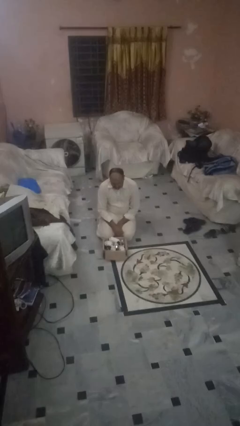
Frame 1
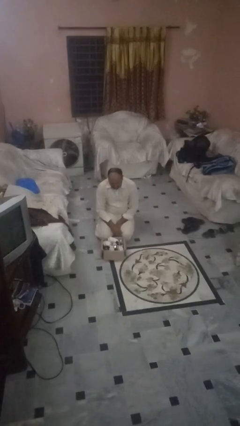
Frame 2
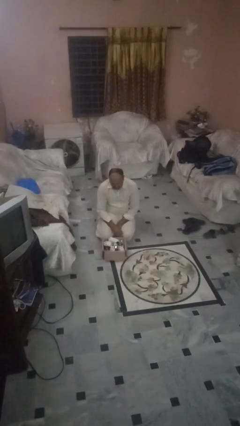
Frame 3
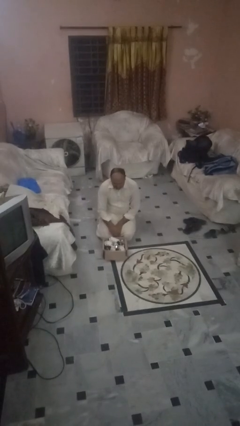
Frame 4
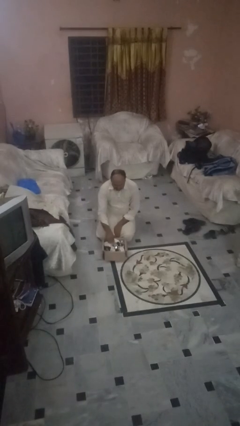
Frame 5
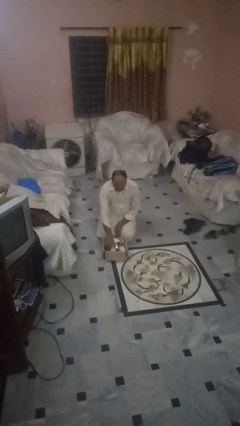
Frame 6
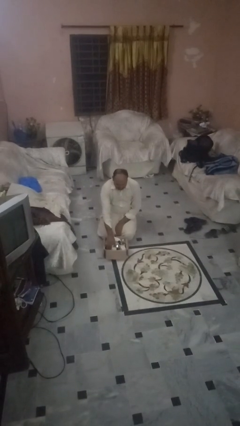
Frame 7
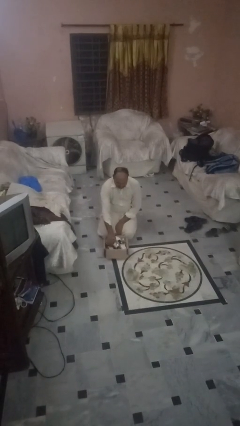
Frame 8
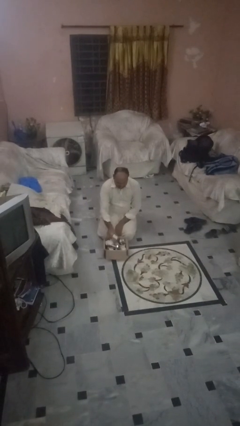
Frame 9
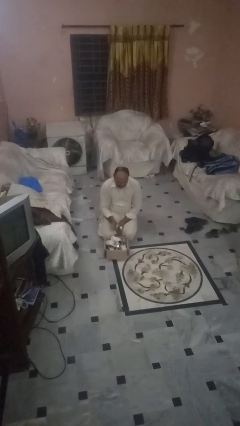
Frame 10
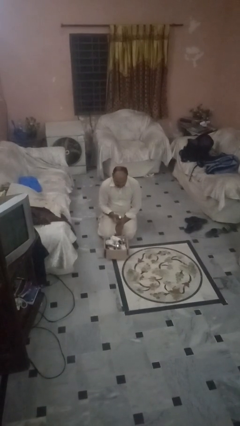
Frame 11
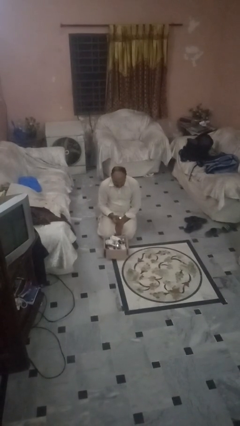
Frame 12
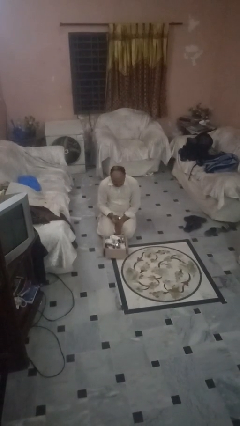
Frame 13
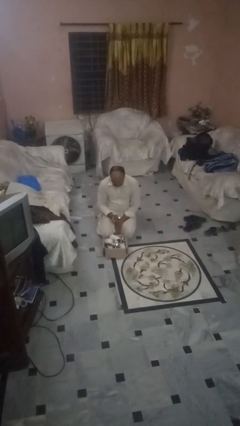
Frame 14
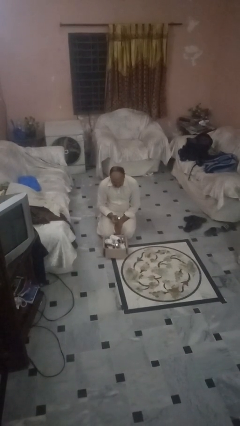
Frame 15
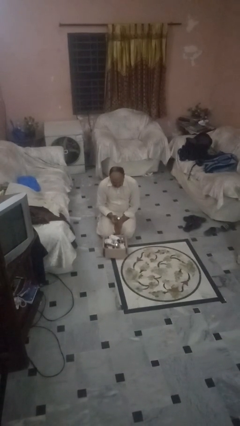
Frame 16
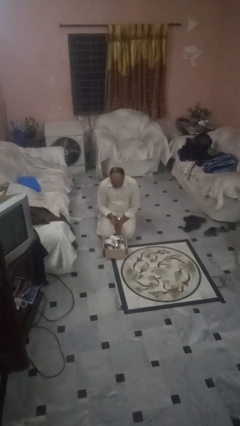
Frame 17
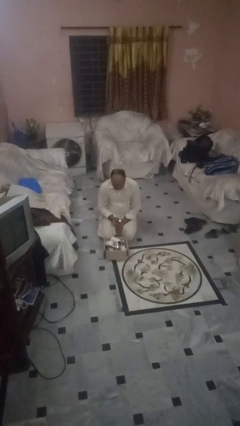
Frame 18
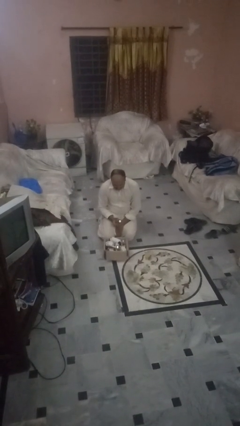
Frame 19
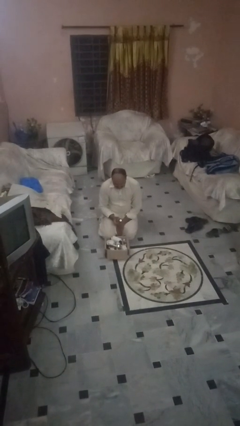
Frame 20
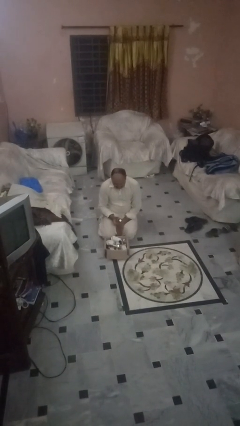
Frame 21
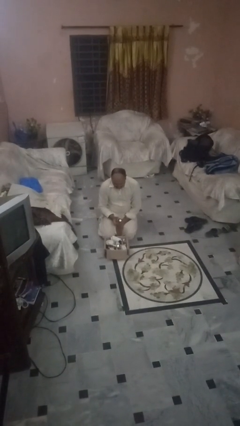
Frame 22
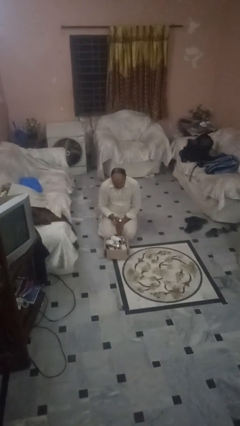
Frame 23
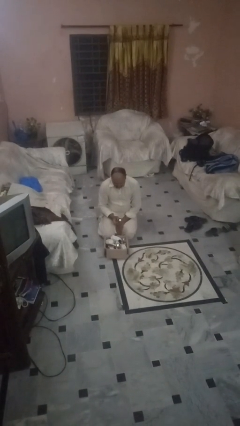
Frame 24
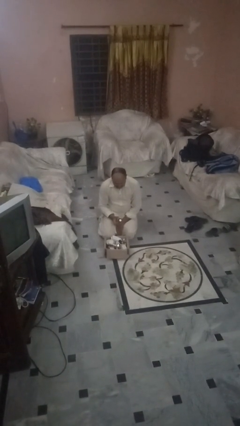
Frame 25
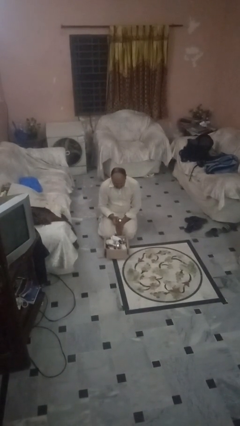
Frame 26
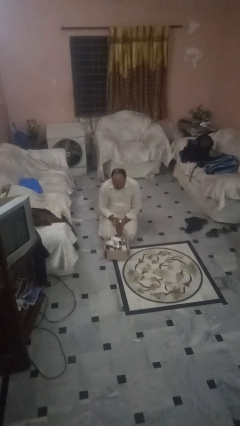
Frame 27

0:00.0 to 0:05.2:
person takes object from box

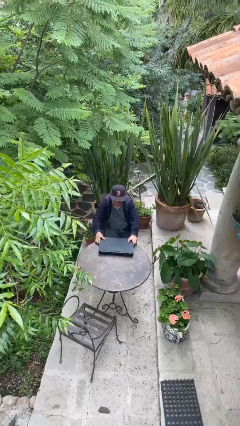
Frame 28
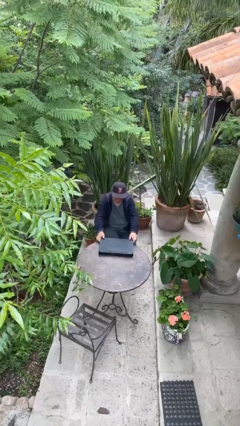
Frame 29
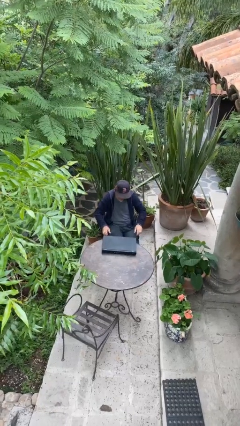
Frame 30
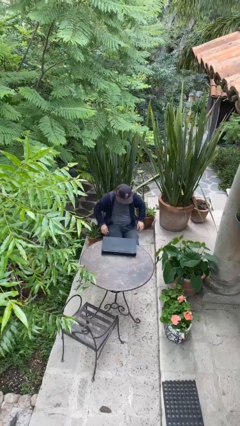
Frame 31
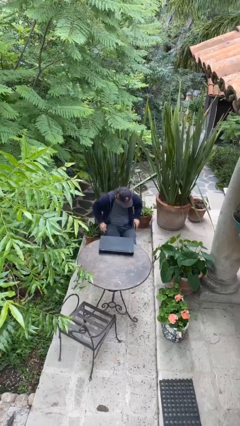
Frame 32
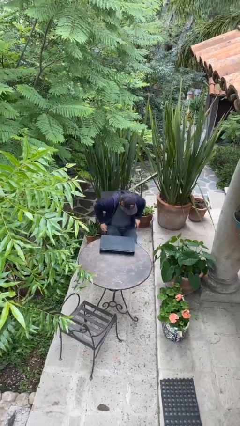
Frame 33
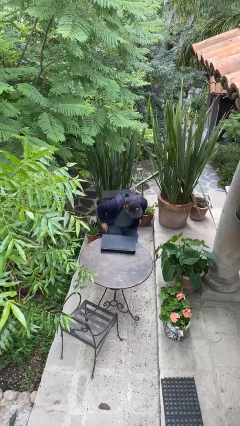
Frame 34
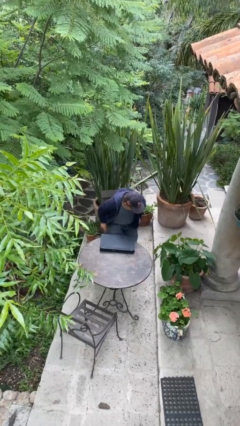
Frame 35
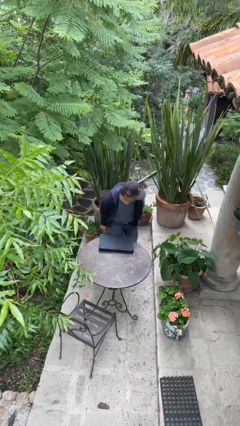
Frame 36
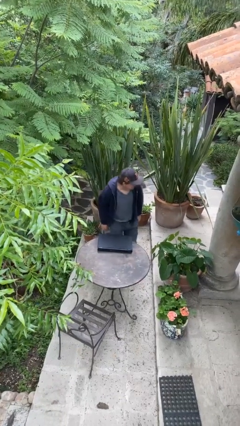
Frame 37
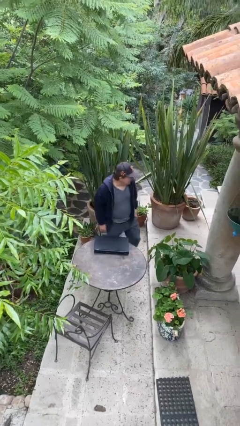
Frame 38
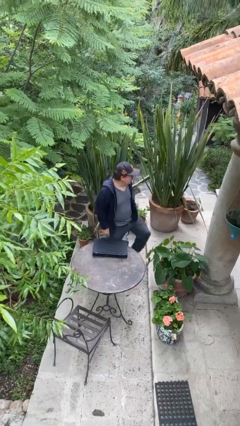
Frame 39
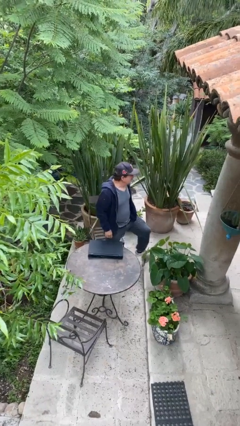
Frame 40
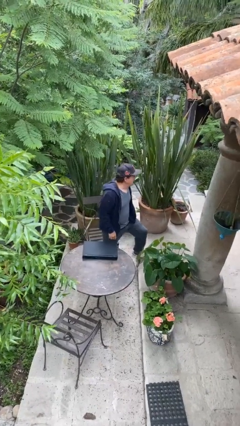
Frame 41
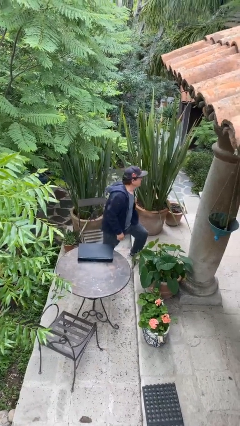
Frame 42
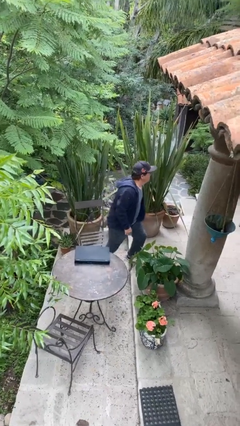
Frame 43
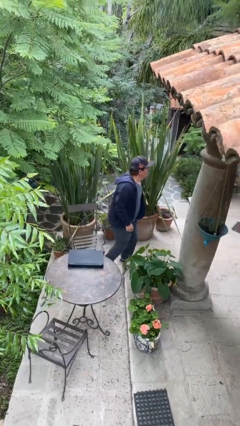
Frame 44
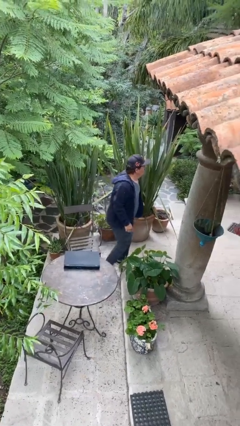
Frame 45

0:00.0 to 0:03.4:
person stands up

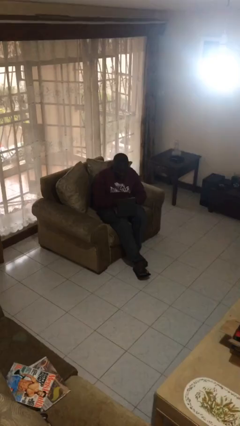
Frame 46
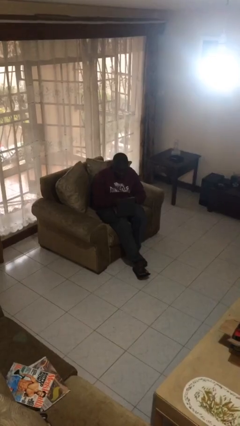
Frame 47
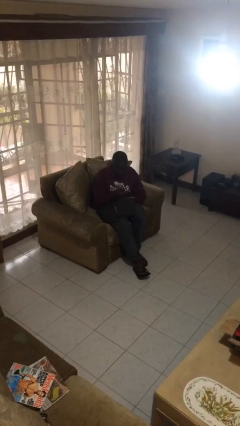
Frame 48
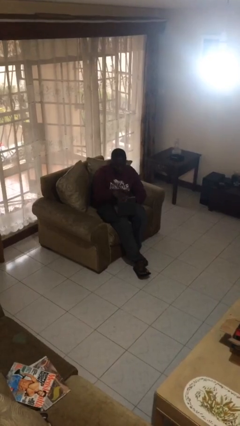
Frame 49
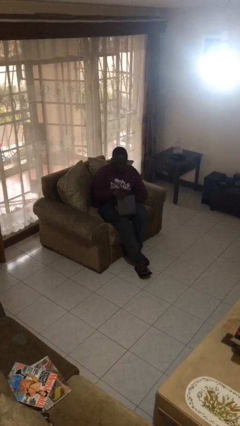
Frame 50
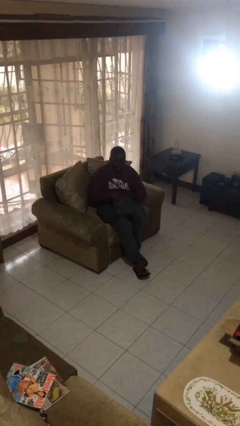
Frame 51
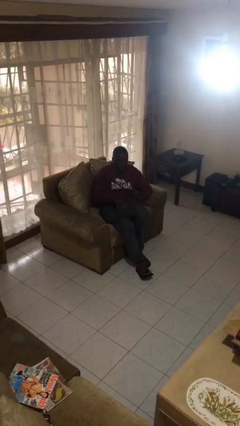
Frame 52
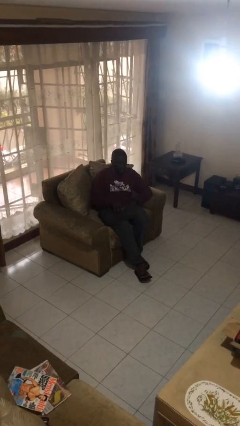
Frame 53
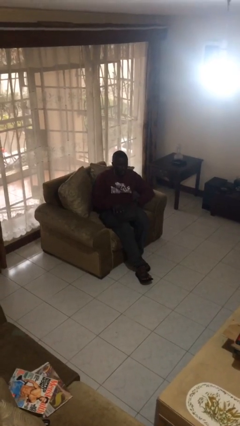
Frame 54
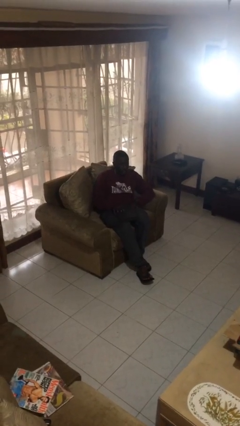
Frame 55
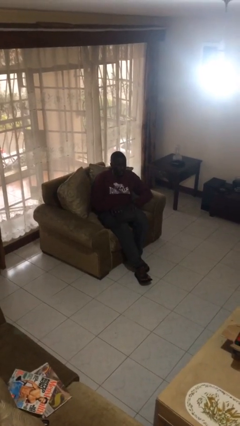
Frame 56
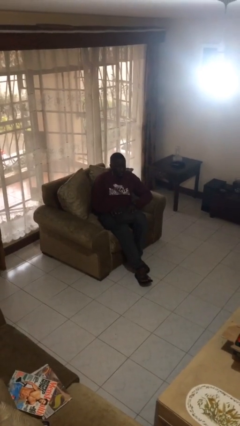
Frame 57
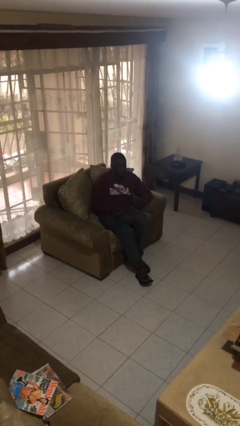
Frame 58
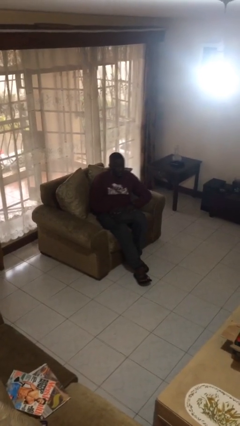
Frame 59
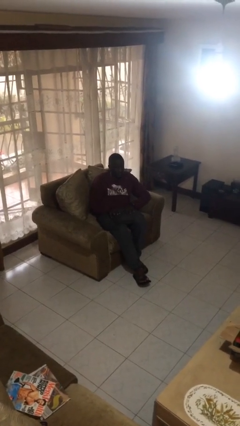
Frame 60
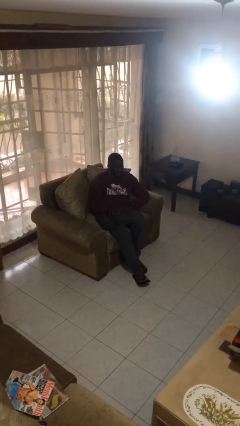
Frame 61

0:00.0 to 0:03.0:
person closes jewelry box

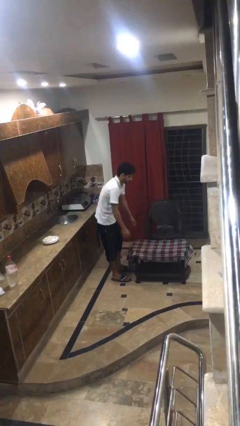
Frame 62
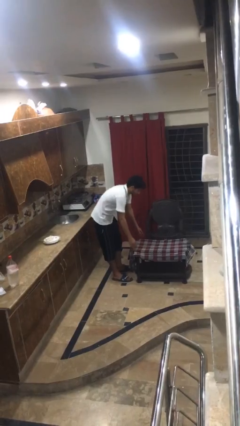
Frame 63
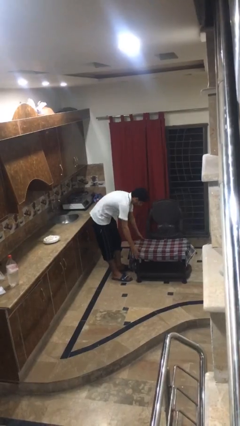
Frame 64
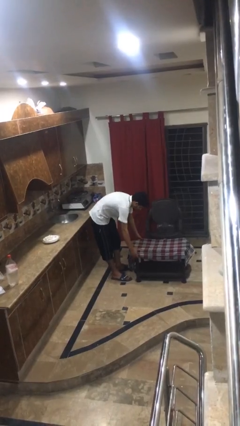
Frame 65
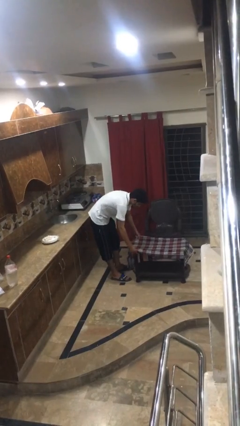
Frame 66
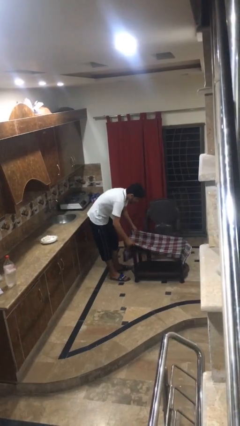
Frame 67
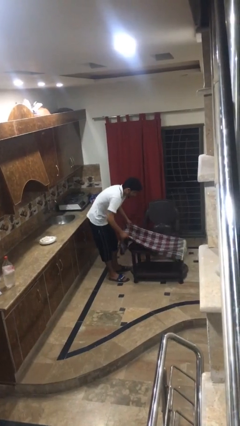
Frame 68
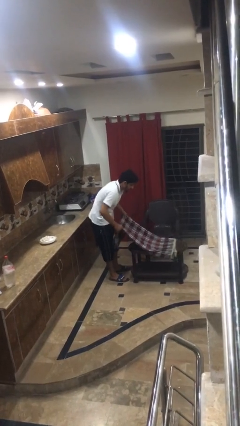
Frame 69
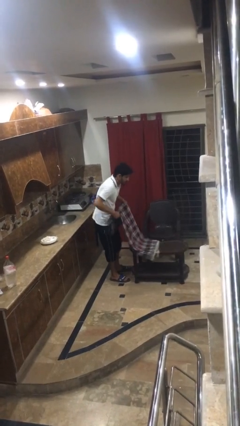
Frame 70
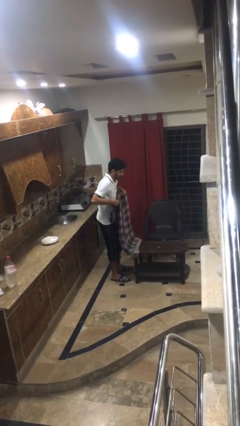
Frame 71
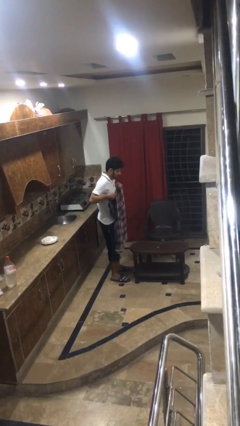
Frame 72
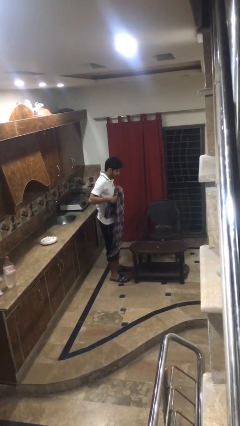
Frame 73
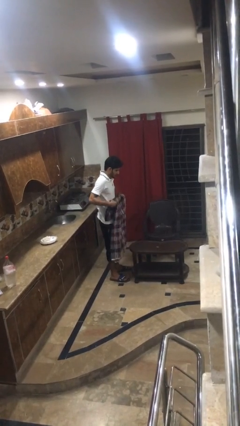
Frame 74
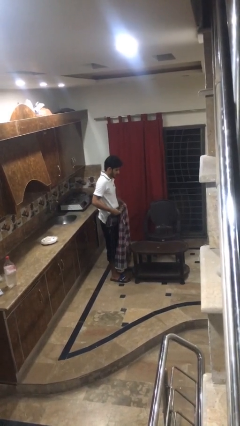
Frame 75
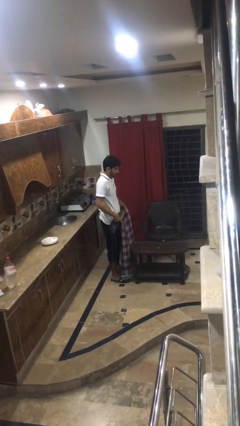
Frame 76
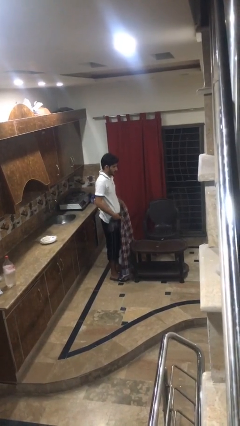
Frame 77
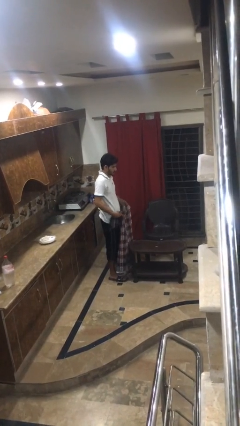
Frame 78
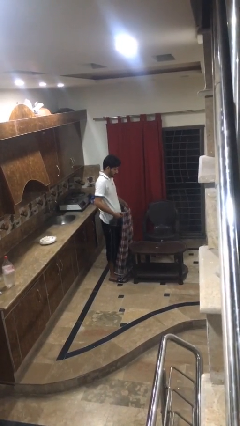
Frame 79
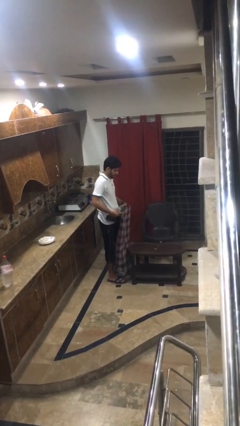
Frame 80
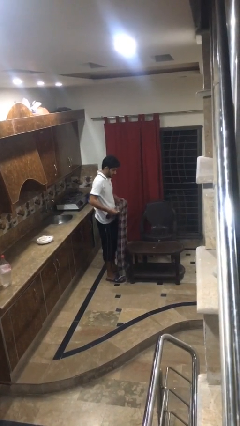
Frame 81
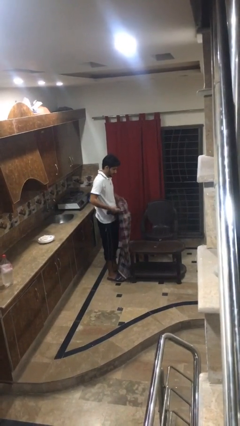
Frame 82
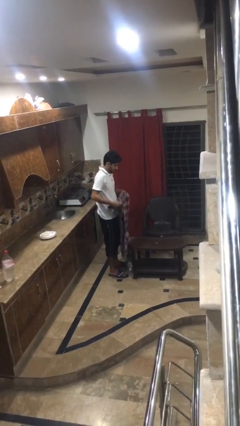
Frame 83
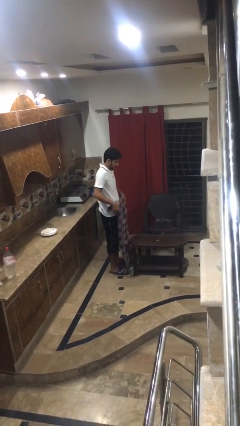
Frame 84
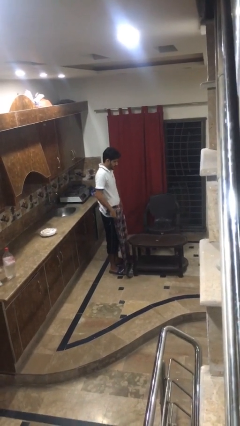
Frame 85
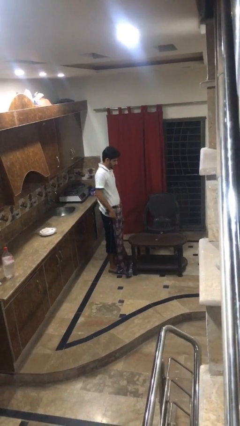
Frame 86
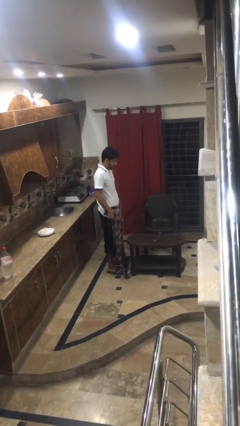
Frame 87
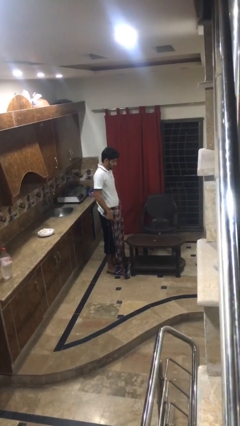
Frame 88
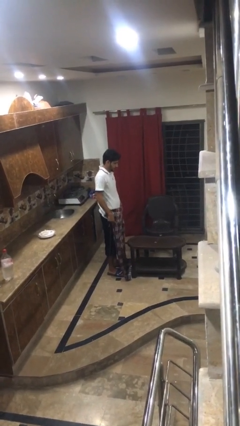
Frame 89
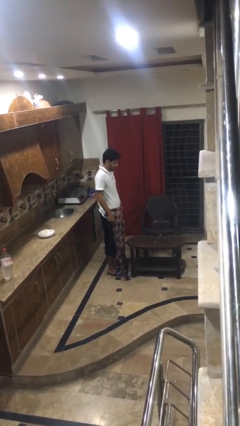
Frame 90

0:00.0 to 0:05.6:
person folds tablecloth

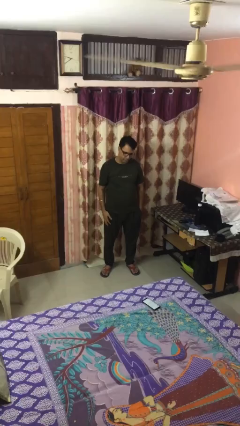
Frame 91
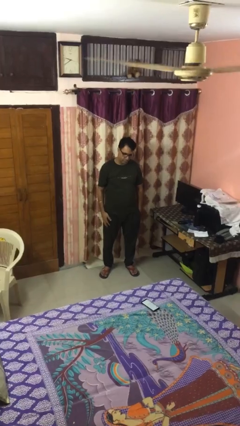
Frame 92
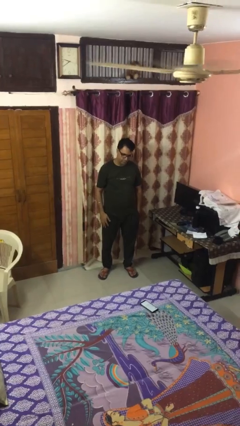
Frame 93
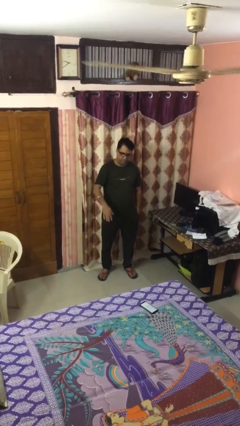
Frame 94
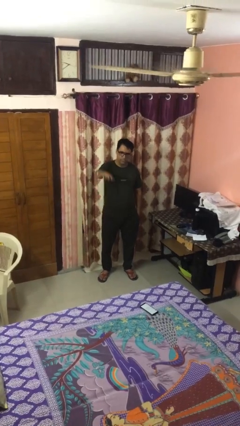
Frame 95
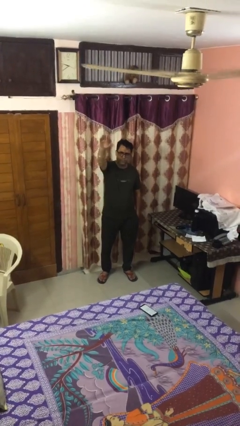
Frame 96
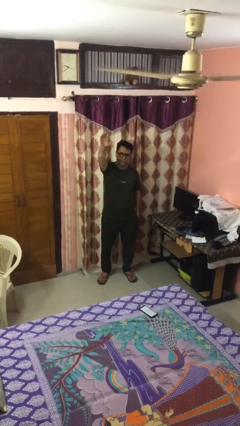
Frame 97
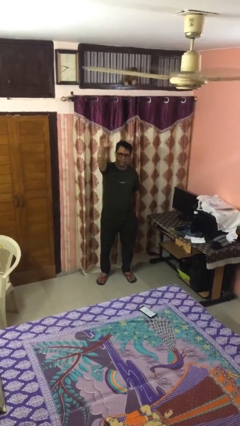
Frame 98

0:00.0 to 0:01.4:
person gestures swipe up
